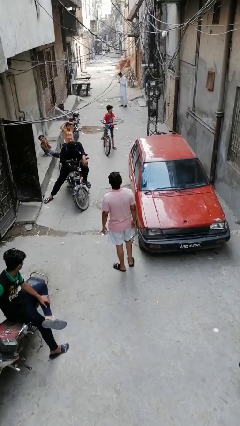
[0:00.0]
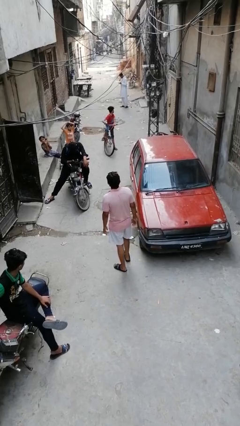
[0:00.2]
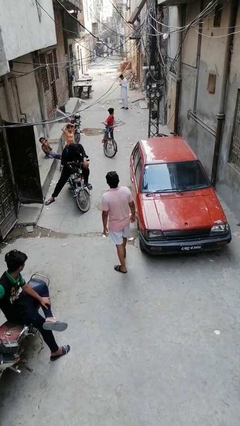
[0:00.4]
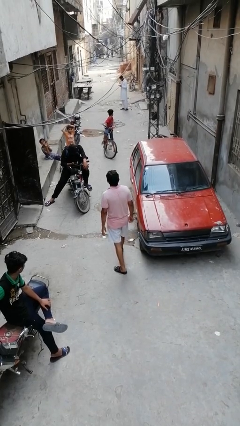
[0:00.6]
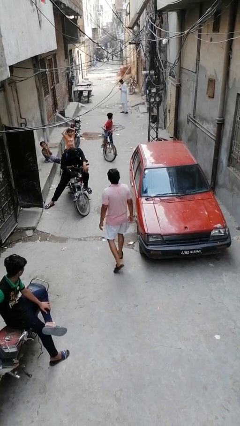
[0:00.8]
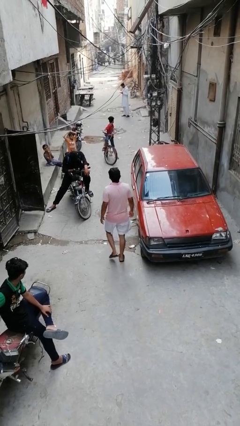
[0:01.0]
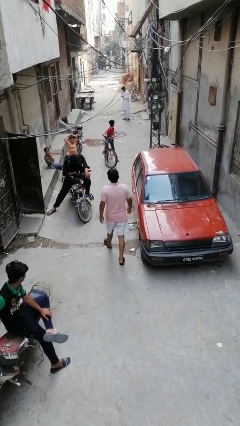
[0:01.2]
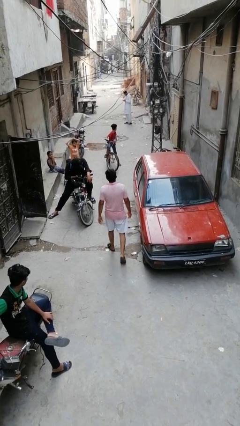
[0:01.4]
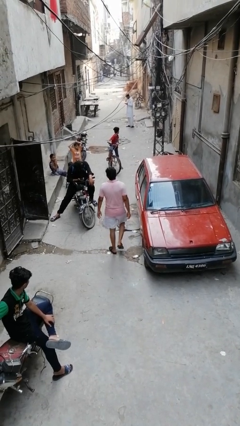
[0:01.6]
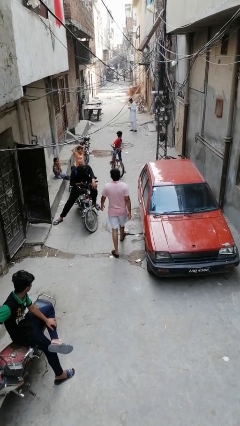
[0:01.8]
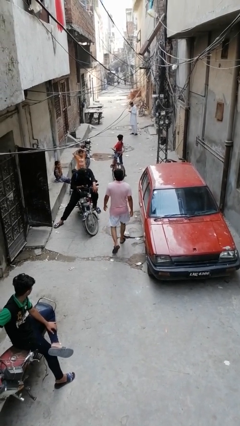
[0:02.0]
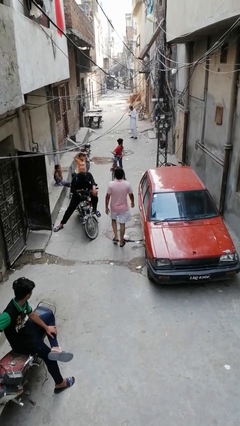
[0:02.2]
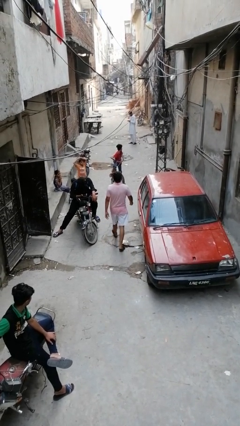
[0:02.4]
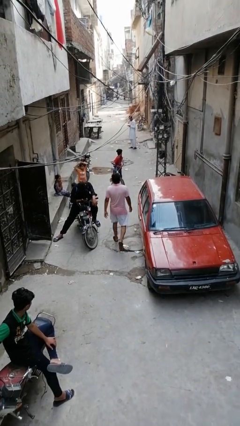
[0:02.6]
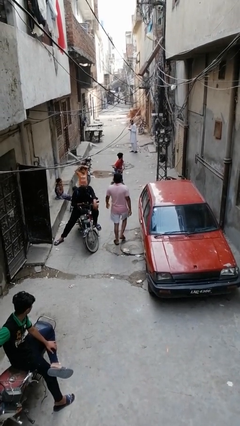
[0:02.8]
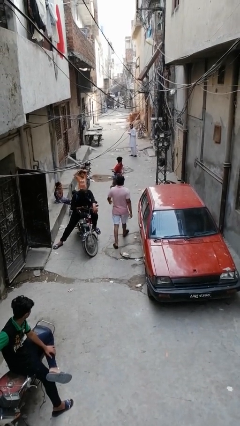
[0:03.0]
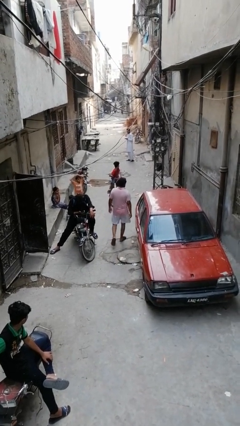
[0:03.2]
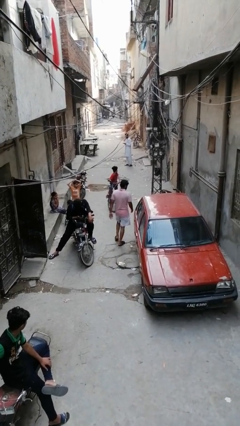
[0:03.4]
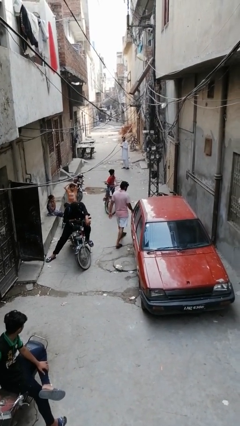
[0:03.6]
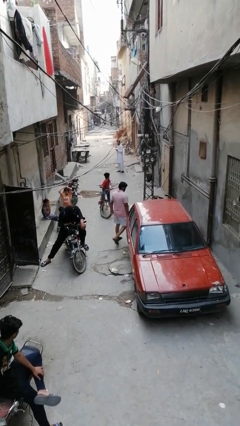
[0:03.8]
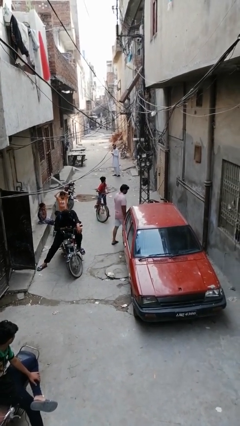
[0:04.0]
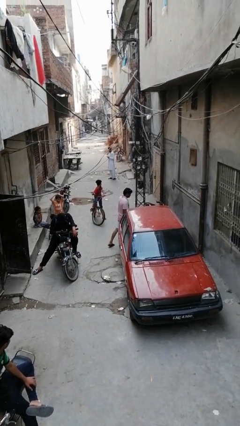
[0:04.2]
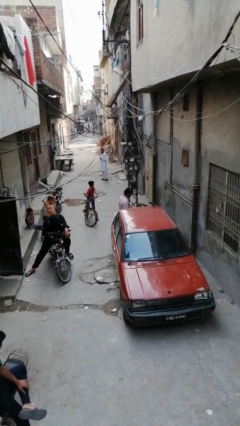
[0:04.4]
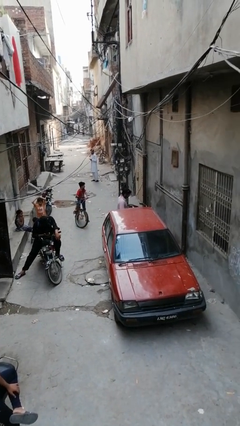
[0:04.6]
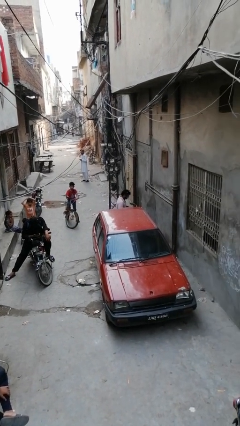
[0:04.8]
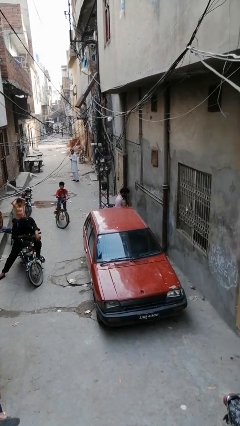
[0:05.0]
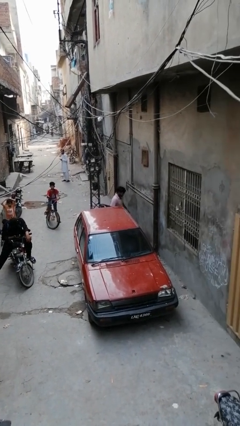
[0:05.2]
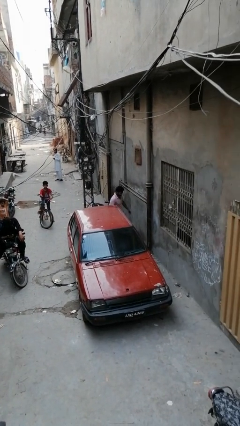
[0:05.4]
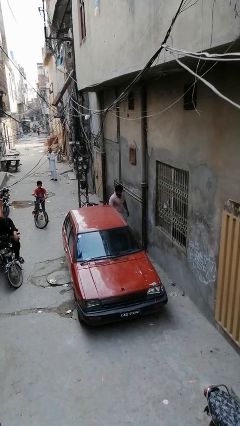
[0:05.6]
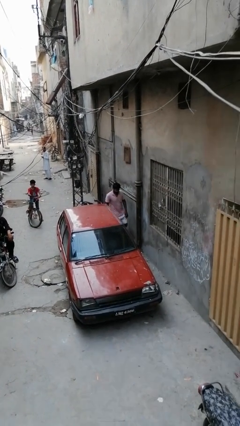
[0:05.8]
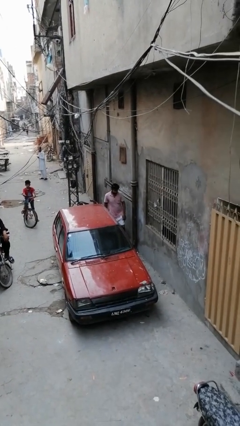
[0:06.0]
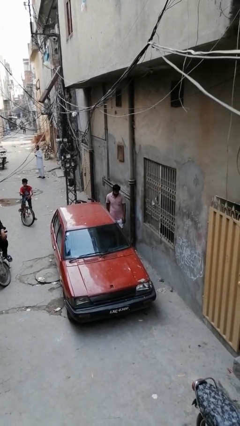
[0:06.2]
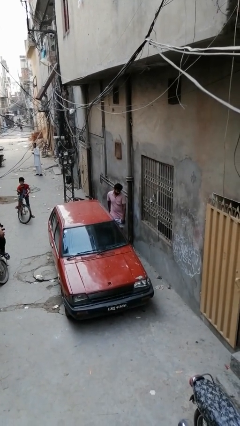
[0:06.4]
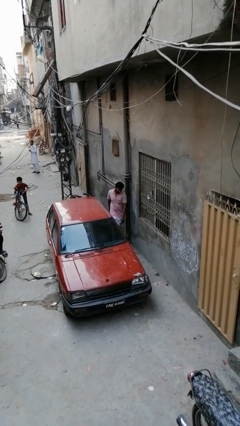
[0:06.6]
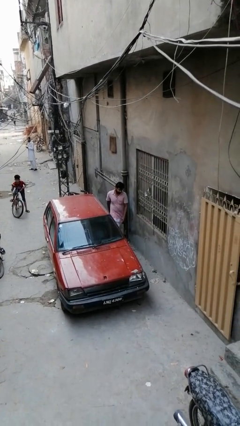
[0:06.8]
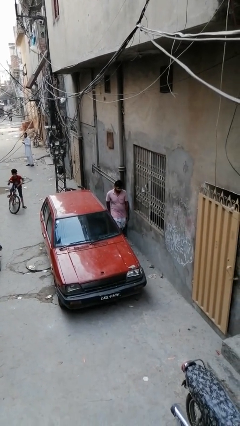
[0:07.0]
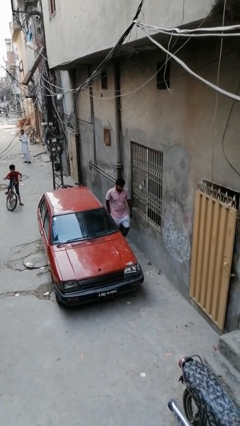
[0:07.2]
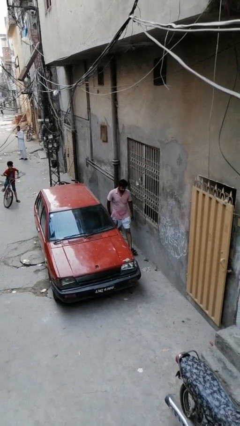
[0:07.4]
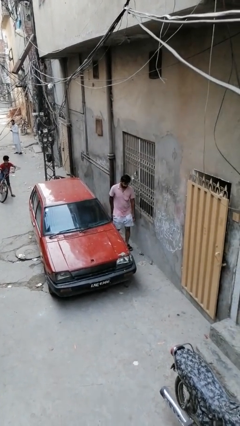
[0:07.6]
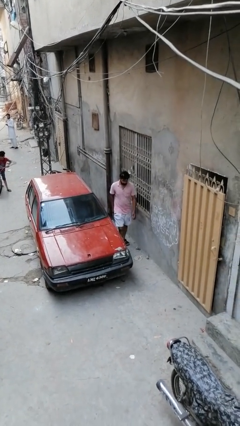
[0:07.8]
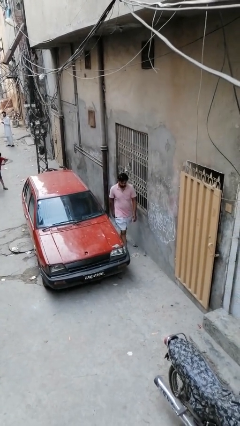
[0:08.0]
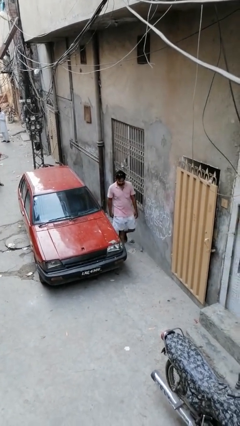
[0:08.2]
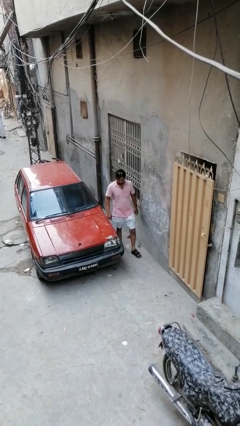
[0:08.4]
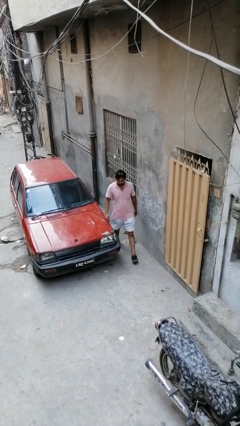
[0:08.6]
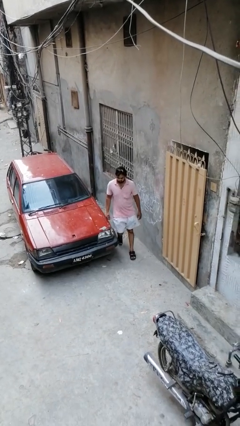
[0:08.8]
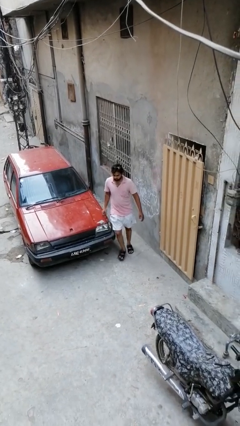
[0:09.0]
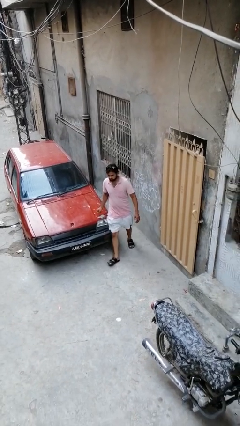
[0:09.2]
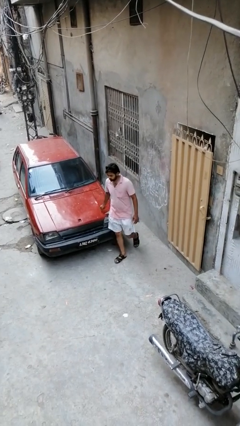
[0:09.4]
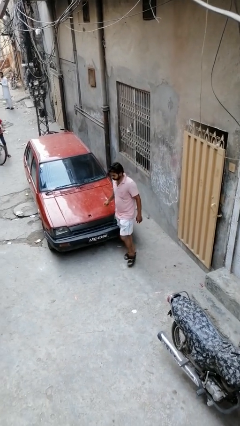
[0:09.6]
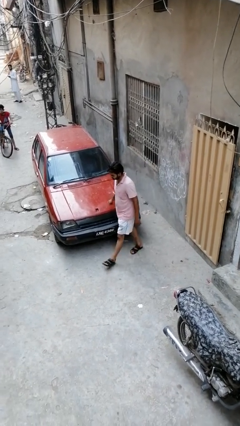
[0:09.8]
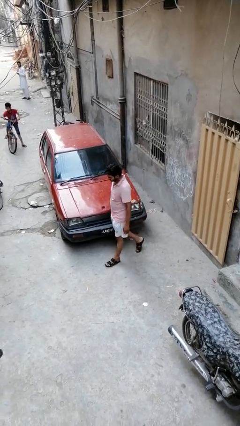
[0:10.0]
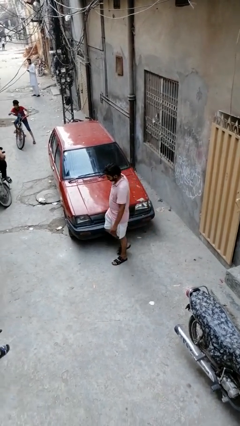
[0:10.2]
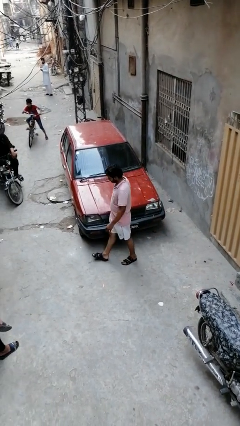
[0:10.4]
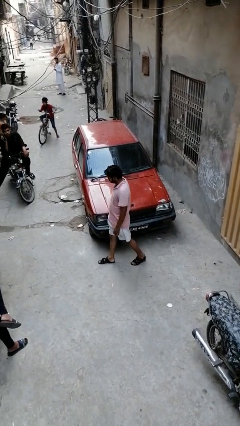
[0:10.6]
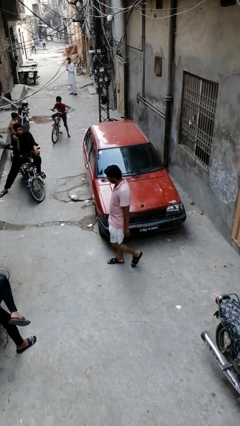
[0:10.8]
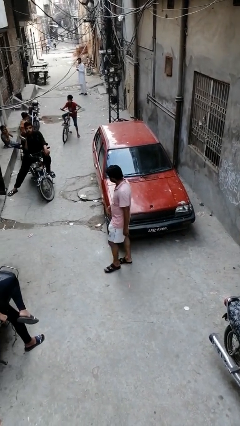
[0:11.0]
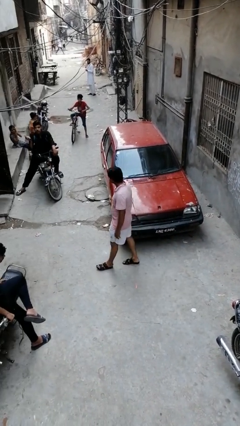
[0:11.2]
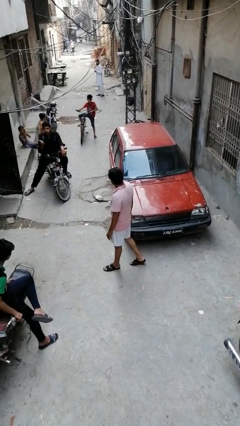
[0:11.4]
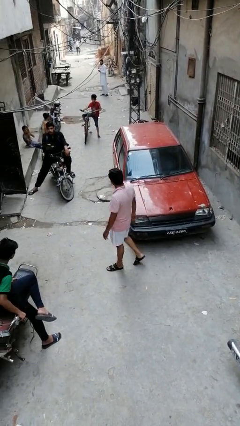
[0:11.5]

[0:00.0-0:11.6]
person walks around car

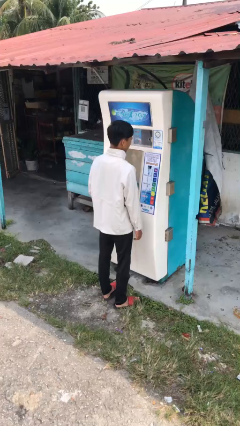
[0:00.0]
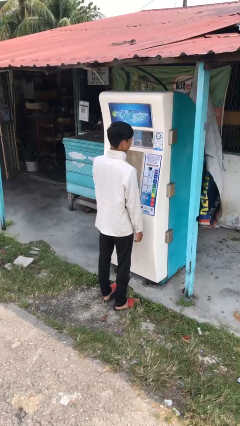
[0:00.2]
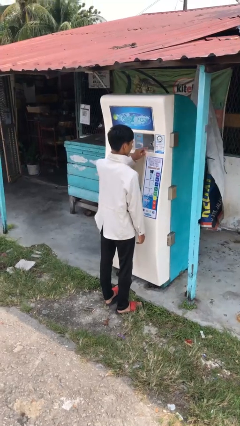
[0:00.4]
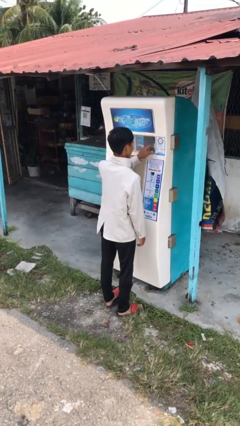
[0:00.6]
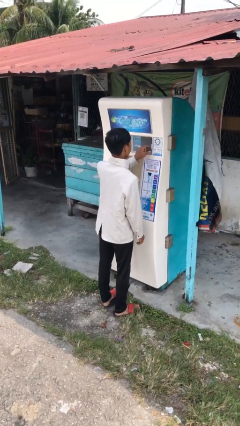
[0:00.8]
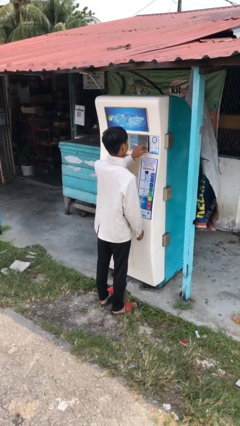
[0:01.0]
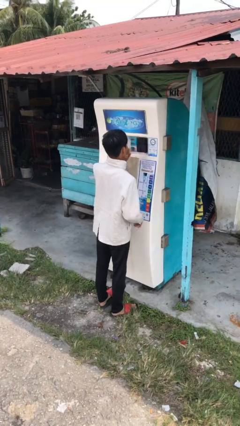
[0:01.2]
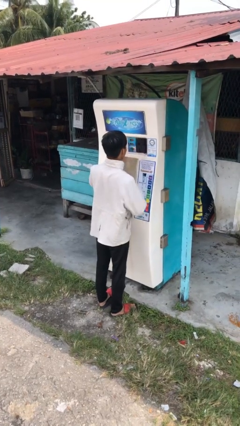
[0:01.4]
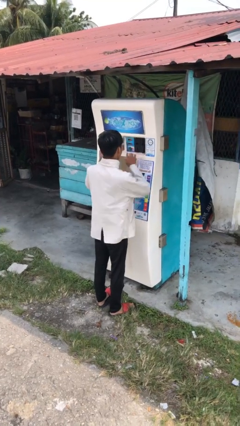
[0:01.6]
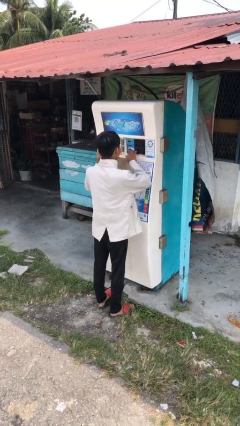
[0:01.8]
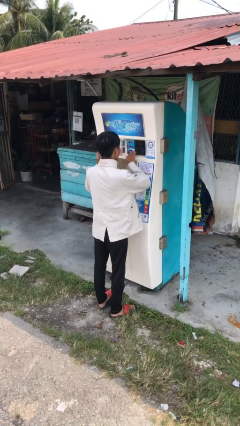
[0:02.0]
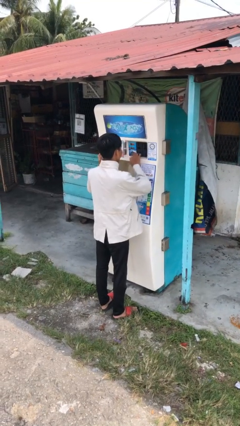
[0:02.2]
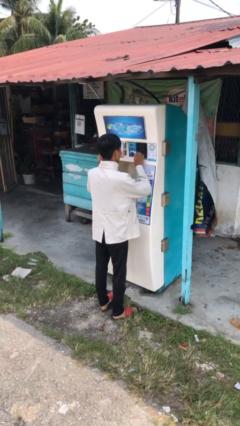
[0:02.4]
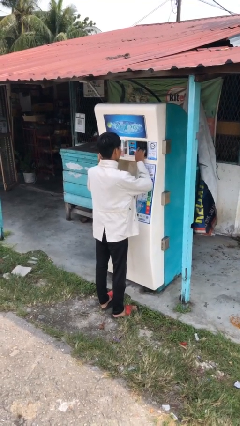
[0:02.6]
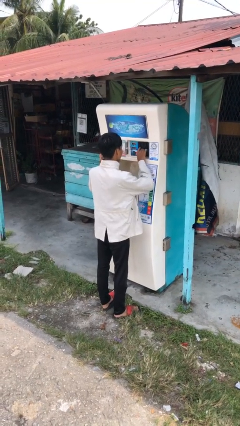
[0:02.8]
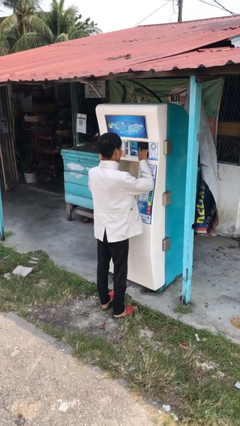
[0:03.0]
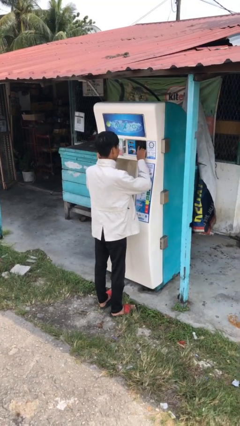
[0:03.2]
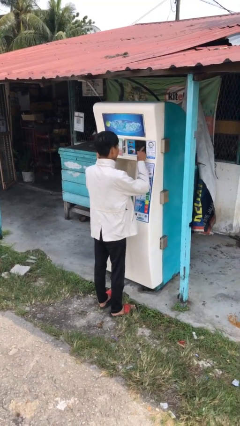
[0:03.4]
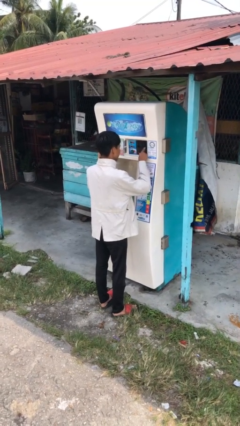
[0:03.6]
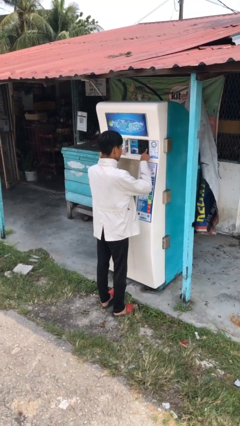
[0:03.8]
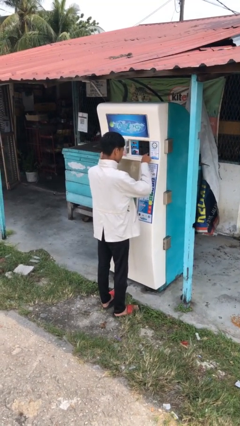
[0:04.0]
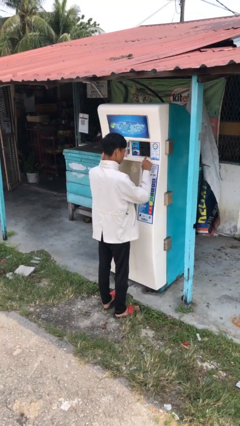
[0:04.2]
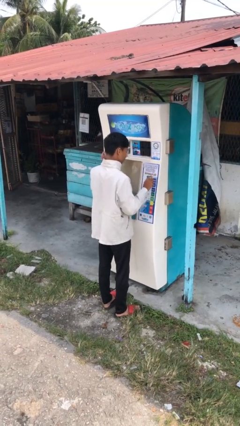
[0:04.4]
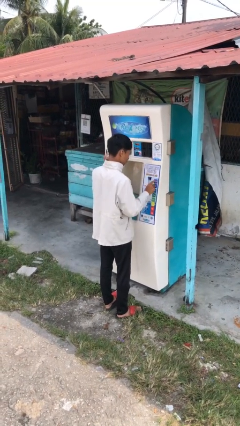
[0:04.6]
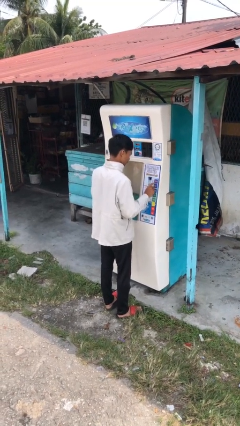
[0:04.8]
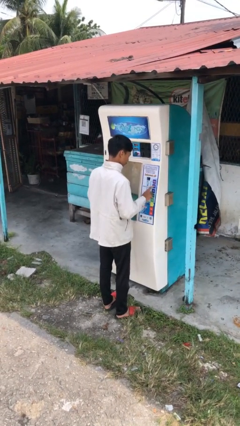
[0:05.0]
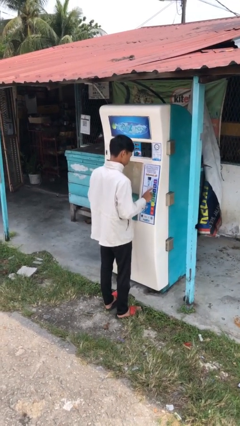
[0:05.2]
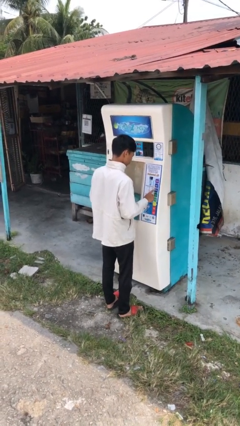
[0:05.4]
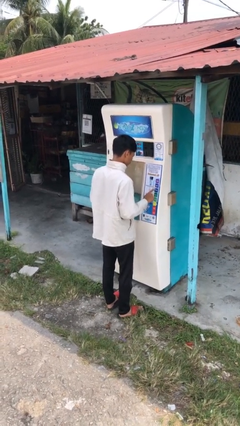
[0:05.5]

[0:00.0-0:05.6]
person purchases from machine

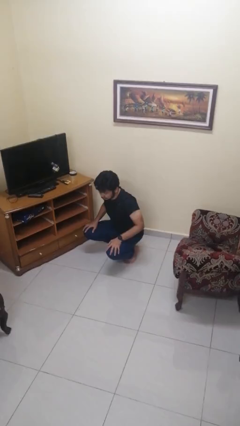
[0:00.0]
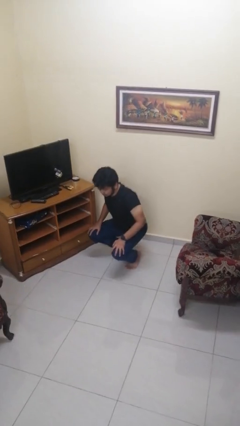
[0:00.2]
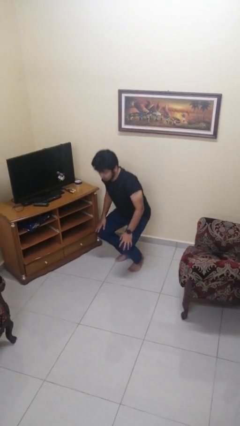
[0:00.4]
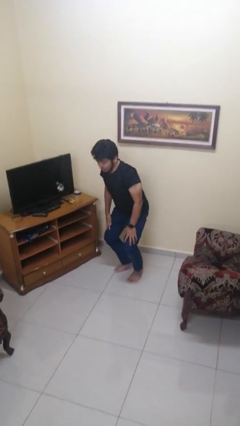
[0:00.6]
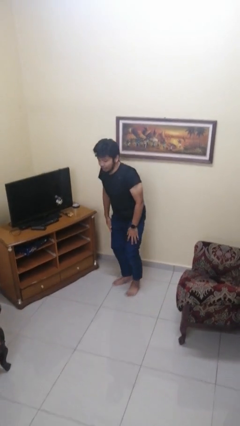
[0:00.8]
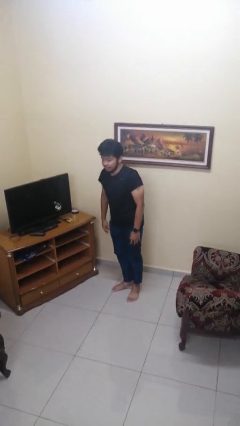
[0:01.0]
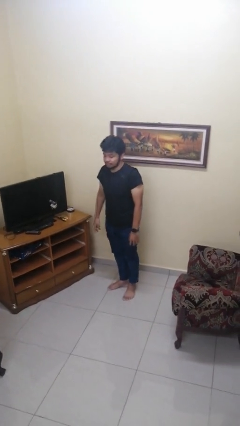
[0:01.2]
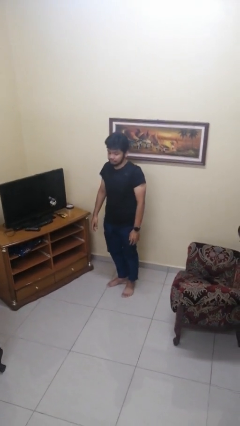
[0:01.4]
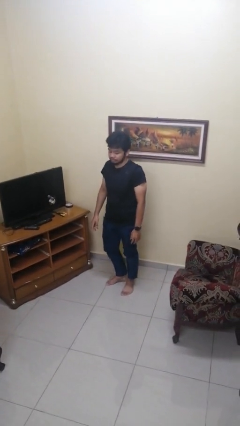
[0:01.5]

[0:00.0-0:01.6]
person stands up
